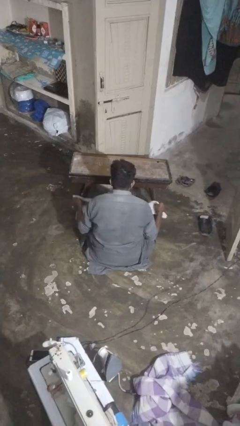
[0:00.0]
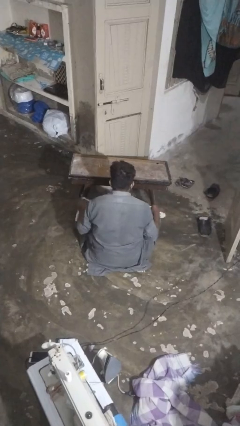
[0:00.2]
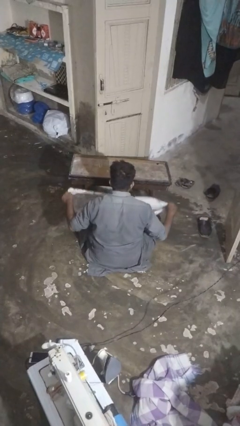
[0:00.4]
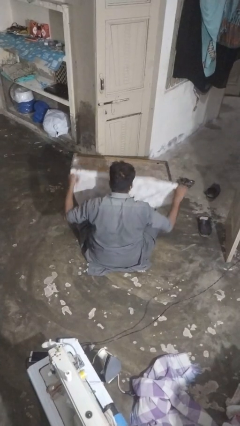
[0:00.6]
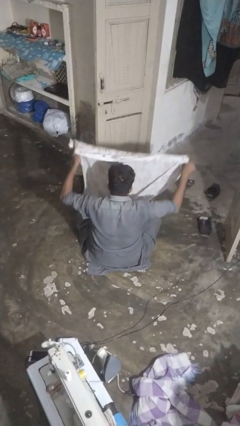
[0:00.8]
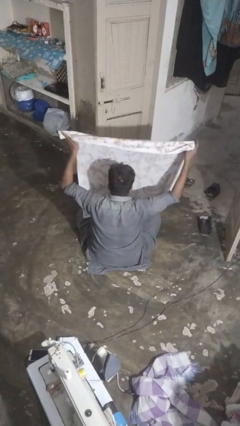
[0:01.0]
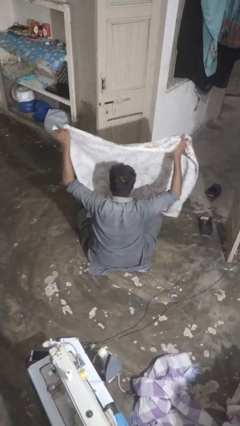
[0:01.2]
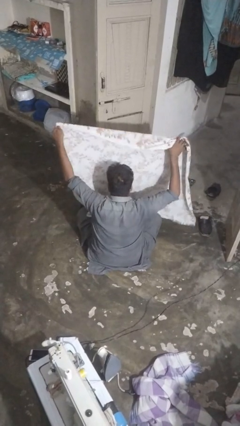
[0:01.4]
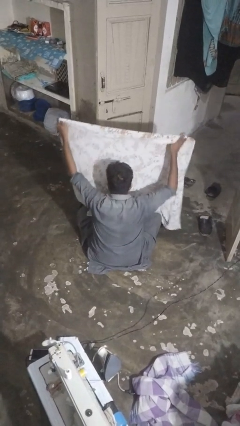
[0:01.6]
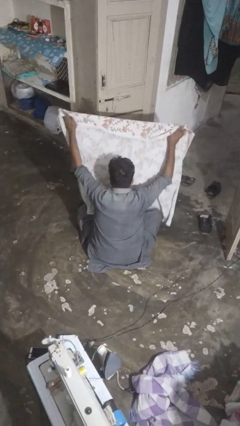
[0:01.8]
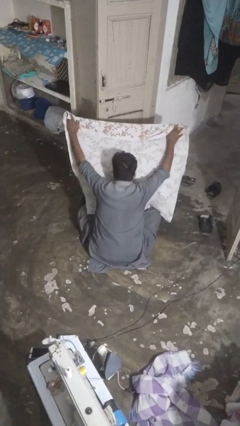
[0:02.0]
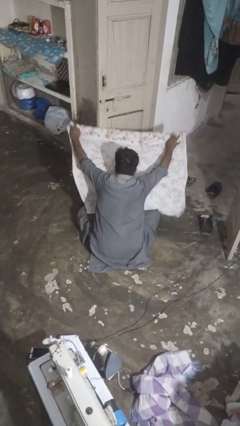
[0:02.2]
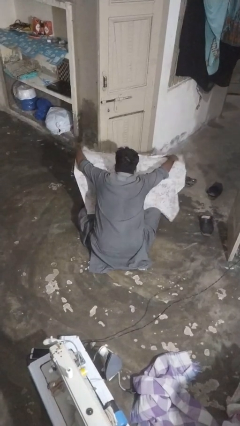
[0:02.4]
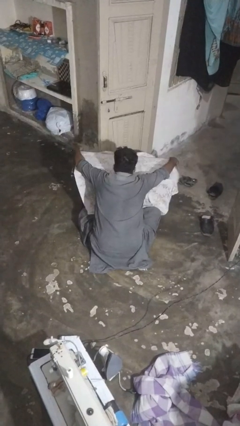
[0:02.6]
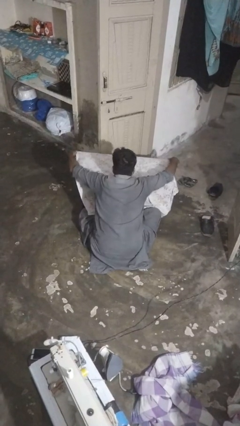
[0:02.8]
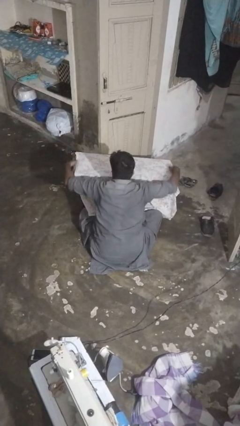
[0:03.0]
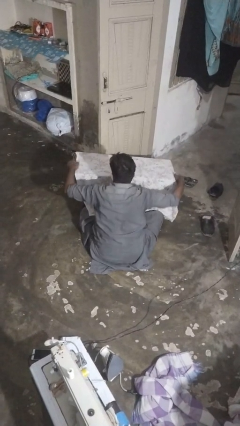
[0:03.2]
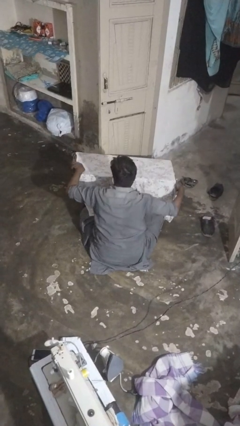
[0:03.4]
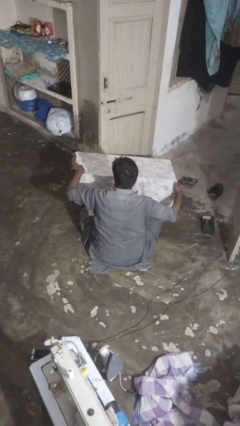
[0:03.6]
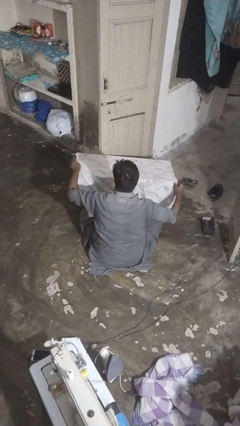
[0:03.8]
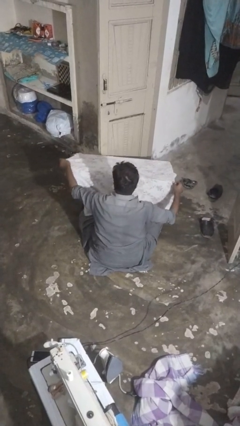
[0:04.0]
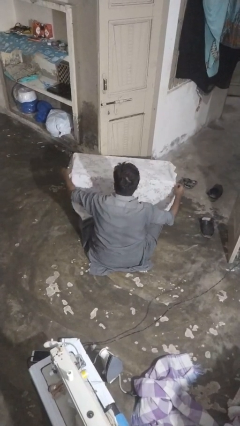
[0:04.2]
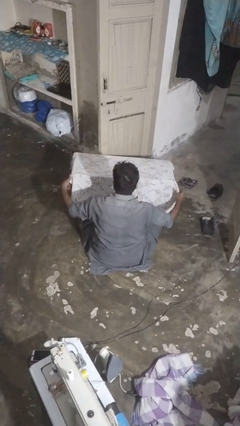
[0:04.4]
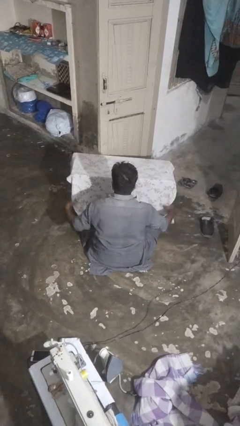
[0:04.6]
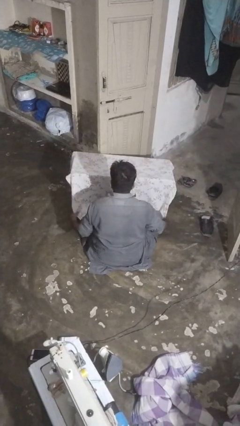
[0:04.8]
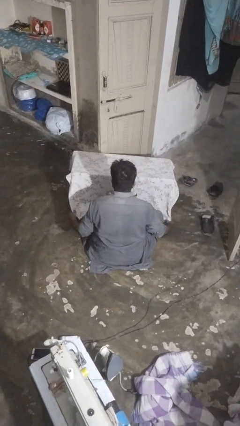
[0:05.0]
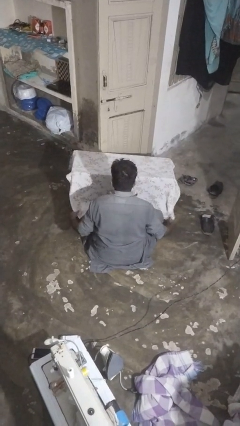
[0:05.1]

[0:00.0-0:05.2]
person spreads tablecloth

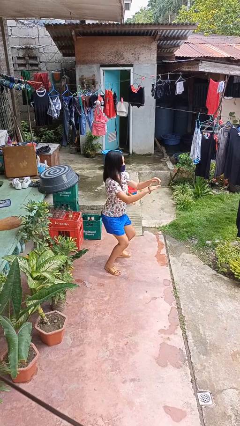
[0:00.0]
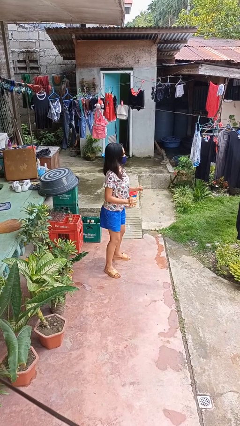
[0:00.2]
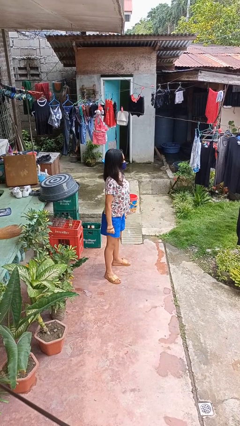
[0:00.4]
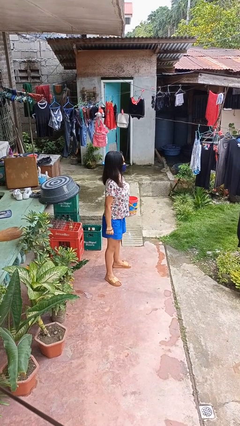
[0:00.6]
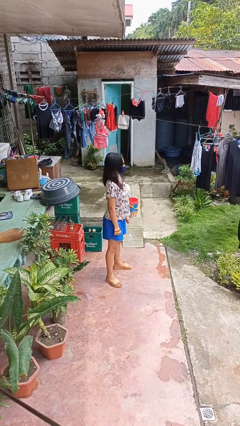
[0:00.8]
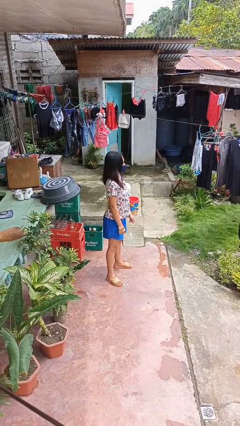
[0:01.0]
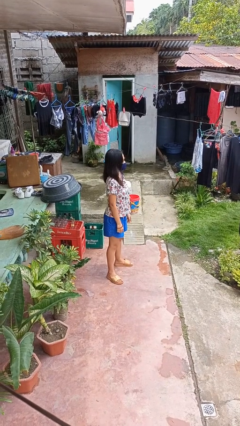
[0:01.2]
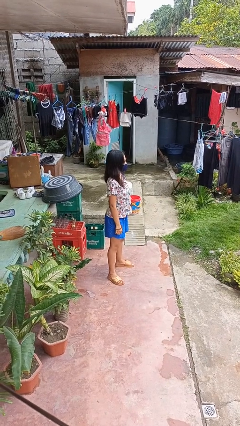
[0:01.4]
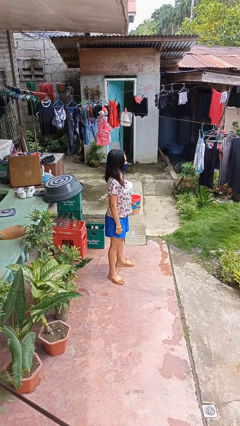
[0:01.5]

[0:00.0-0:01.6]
person stands up

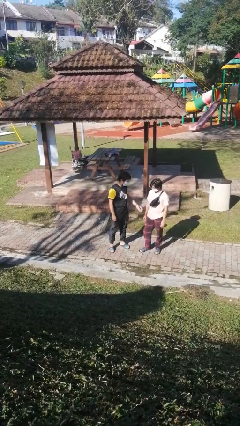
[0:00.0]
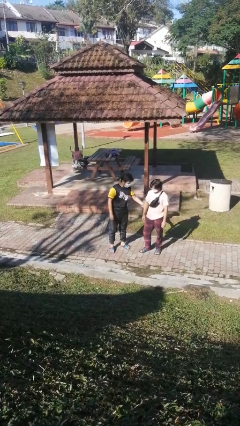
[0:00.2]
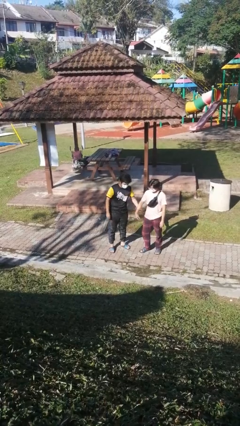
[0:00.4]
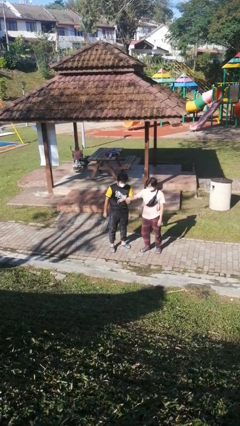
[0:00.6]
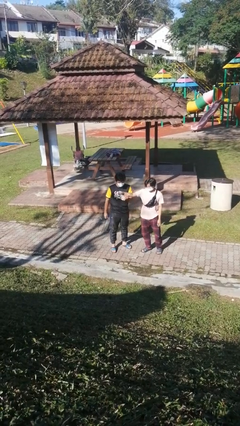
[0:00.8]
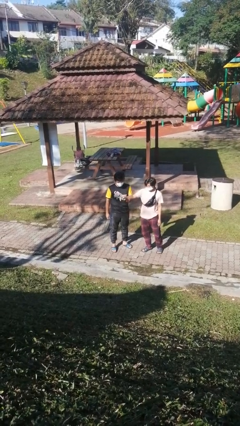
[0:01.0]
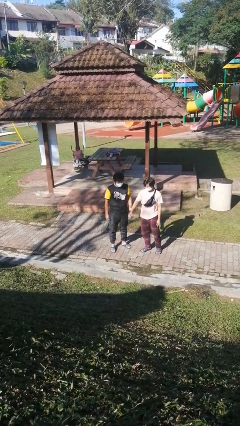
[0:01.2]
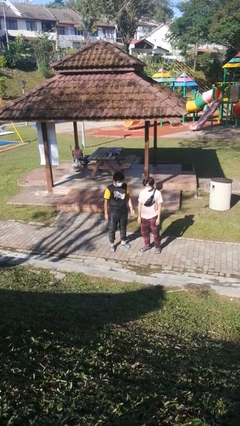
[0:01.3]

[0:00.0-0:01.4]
person grabs person by forearm

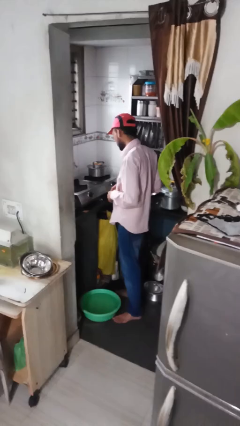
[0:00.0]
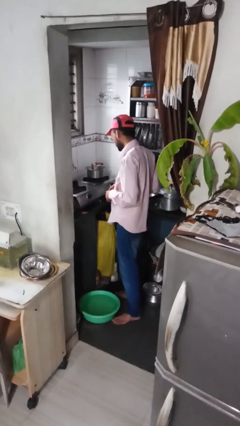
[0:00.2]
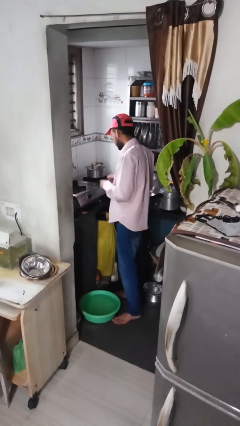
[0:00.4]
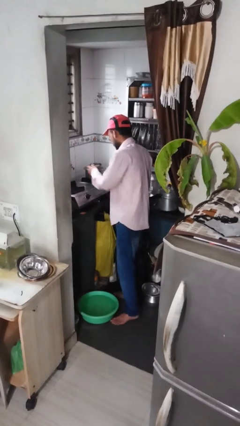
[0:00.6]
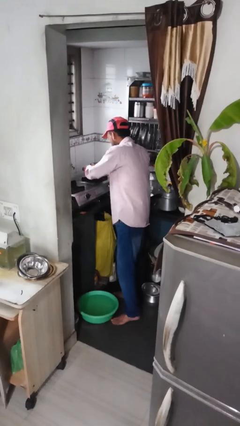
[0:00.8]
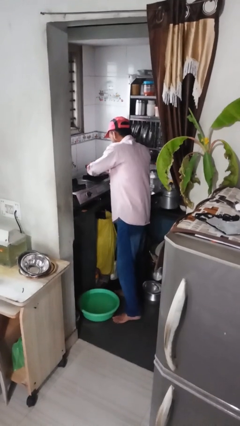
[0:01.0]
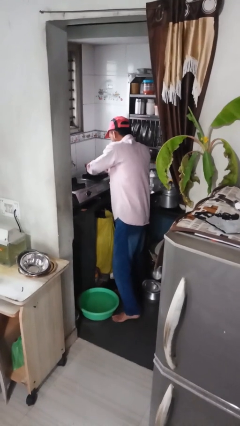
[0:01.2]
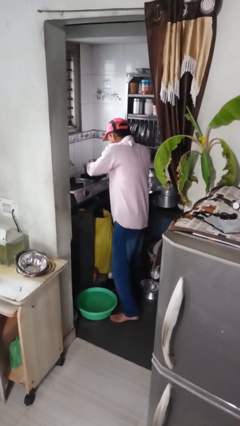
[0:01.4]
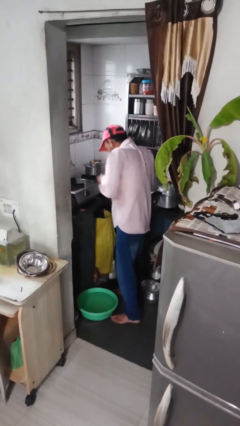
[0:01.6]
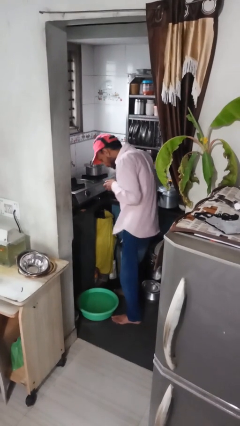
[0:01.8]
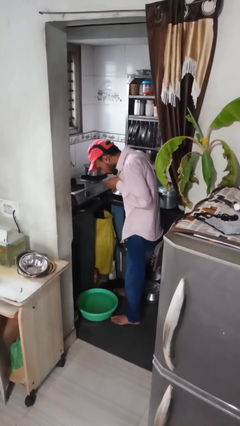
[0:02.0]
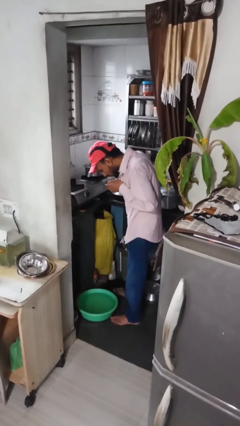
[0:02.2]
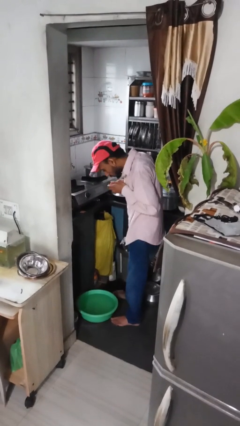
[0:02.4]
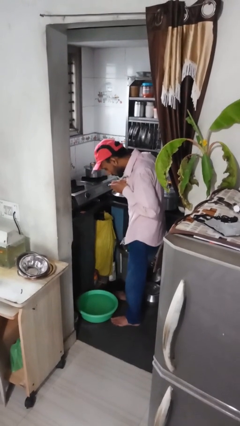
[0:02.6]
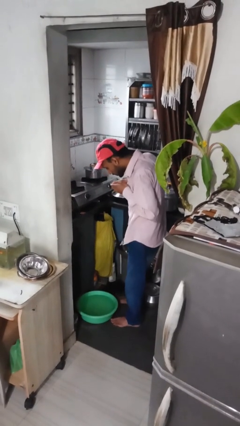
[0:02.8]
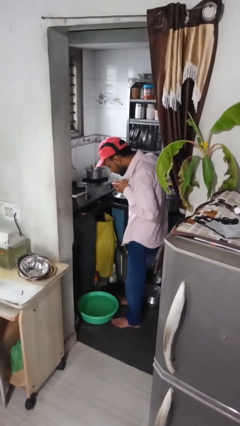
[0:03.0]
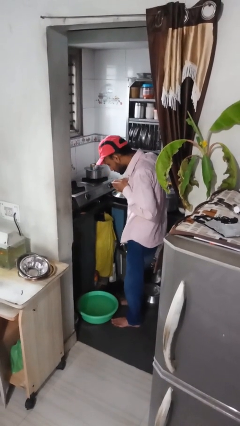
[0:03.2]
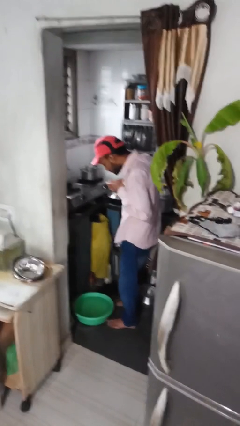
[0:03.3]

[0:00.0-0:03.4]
person burns hand

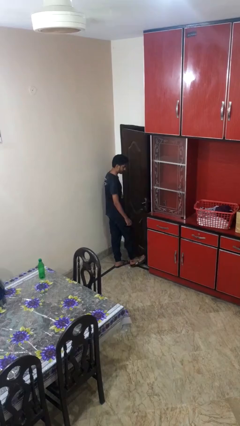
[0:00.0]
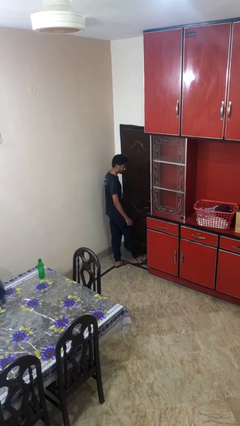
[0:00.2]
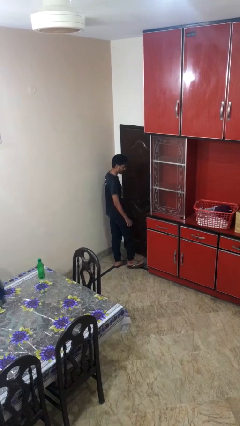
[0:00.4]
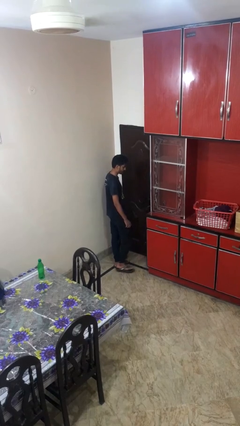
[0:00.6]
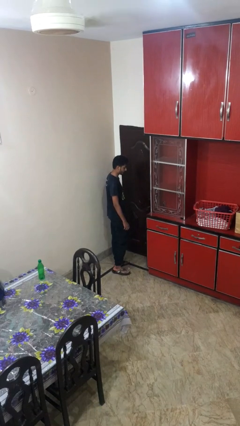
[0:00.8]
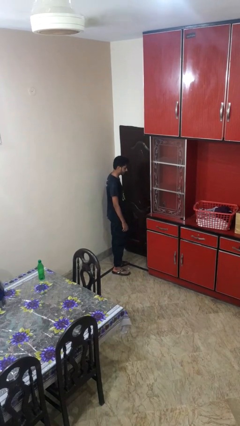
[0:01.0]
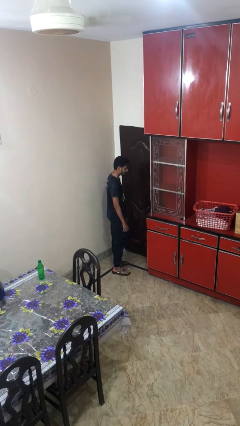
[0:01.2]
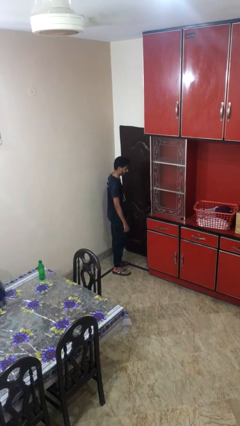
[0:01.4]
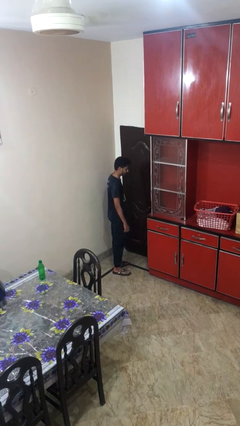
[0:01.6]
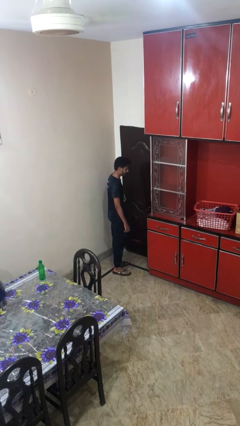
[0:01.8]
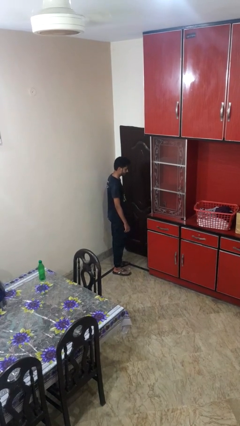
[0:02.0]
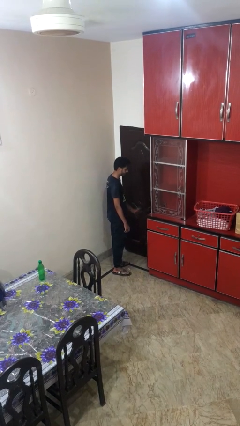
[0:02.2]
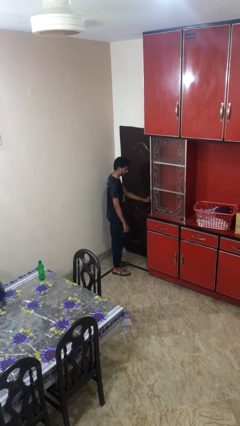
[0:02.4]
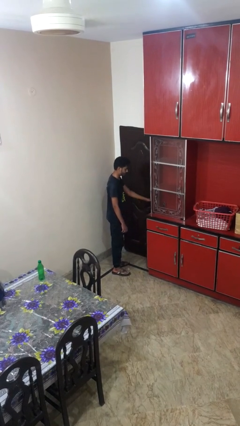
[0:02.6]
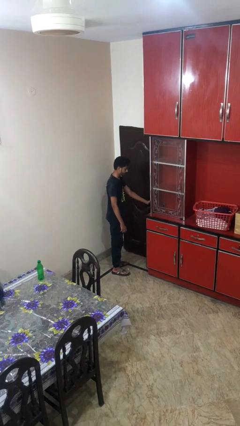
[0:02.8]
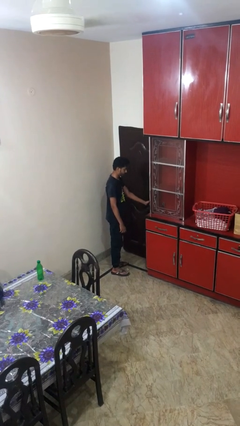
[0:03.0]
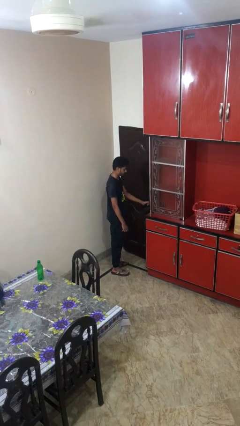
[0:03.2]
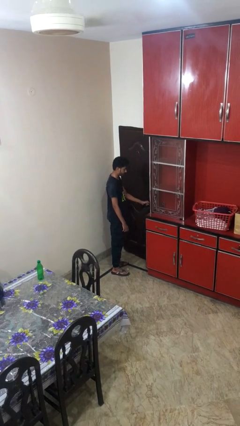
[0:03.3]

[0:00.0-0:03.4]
person closes door with foot

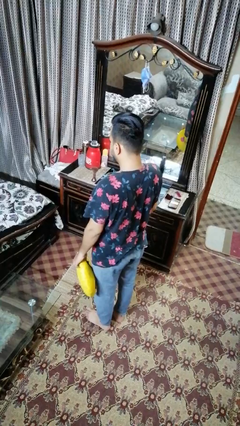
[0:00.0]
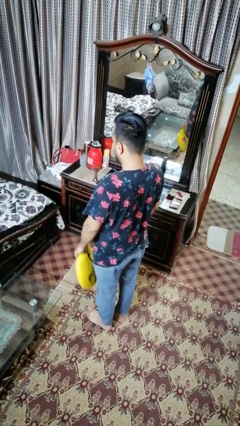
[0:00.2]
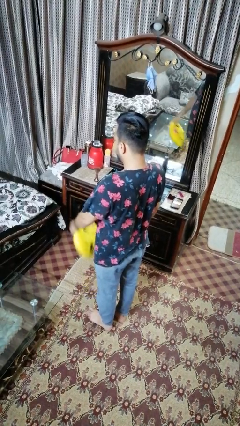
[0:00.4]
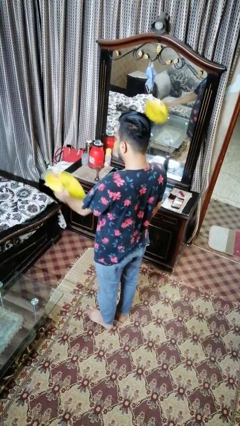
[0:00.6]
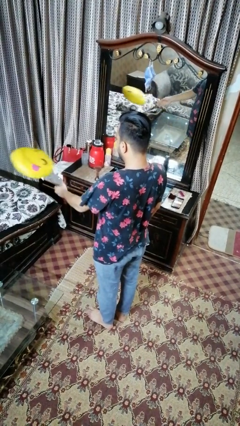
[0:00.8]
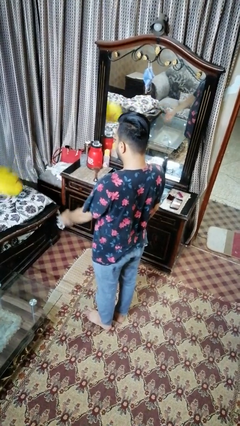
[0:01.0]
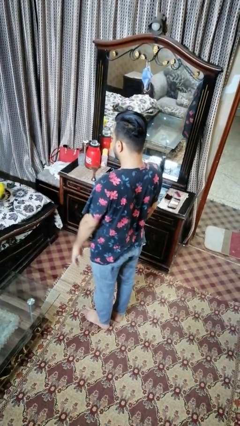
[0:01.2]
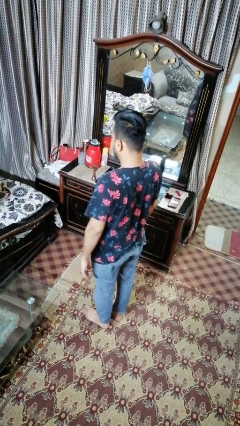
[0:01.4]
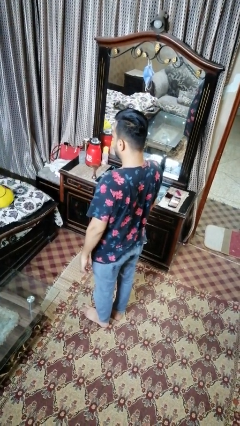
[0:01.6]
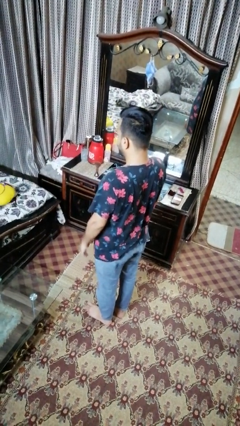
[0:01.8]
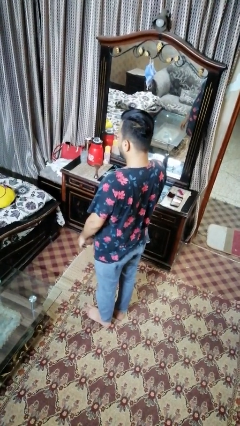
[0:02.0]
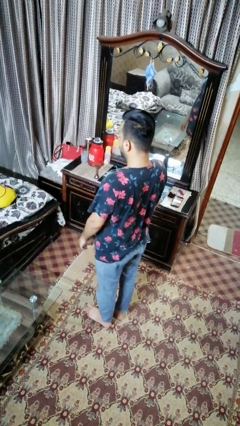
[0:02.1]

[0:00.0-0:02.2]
person throws object on bed

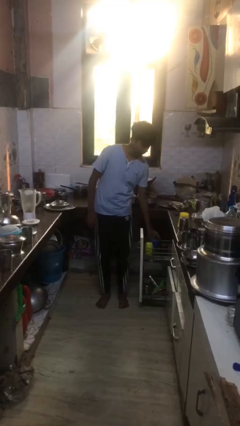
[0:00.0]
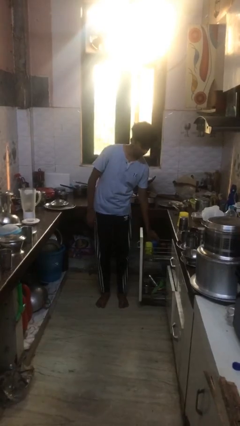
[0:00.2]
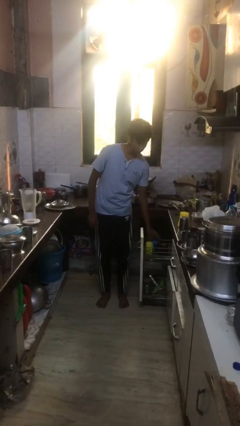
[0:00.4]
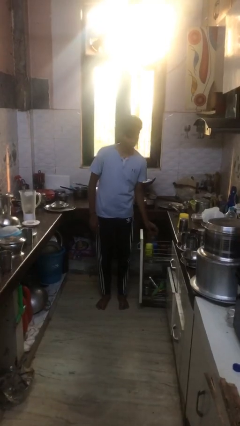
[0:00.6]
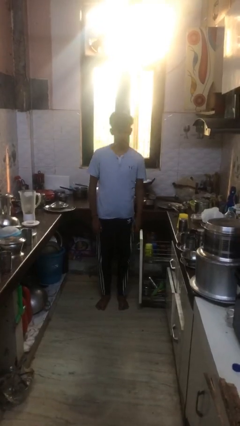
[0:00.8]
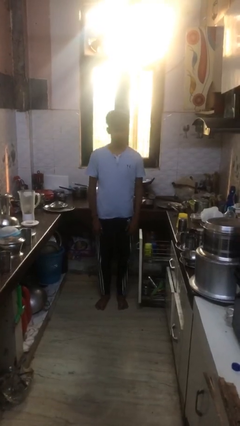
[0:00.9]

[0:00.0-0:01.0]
person loads dishwasher
